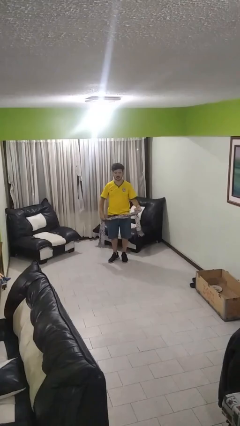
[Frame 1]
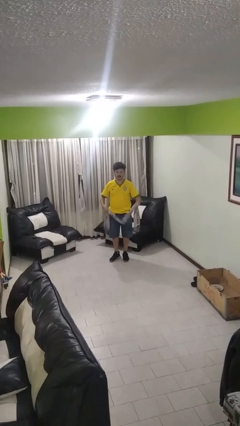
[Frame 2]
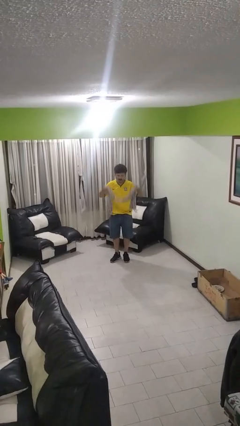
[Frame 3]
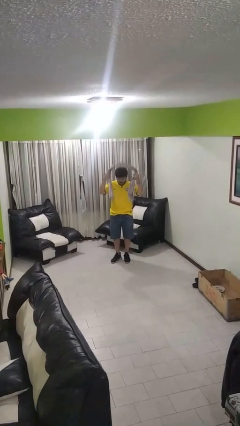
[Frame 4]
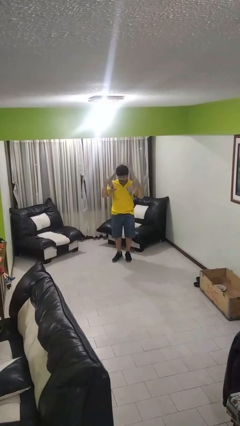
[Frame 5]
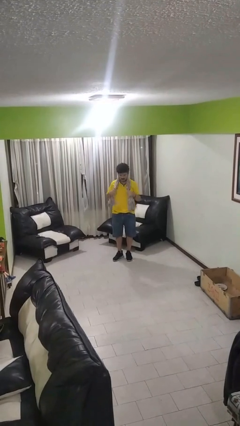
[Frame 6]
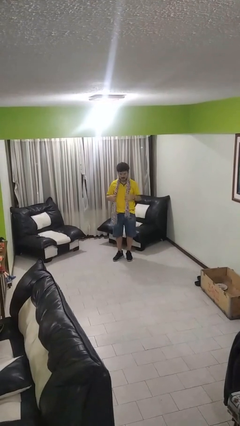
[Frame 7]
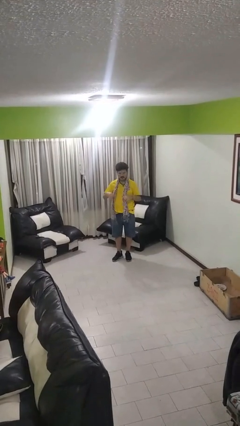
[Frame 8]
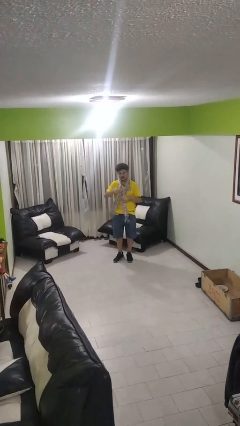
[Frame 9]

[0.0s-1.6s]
person puts on scarf

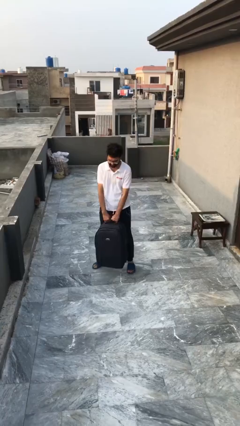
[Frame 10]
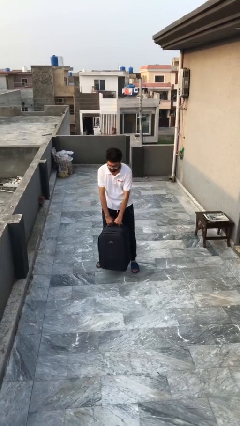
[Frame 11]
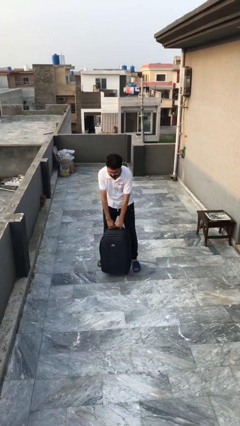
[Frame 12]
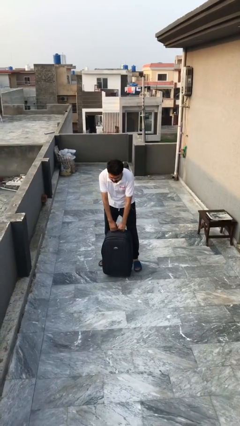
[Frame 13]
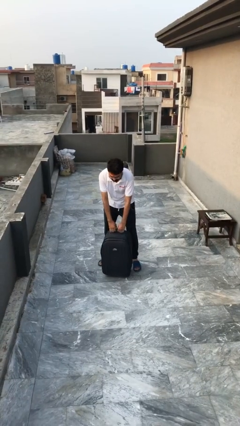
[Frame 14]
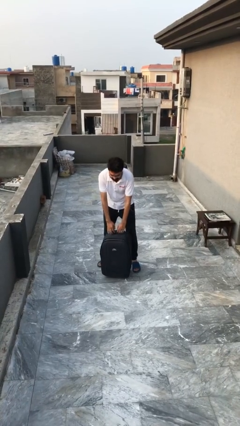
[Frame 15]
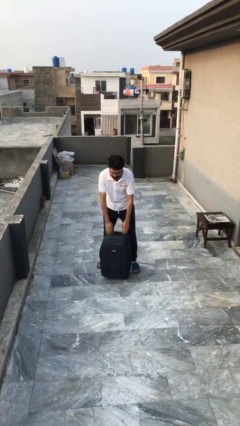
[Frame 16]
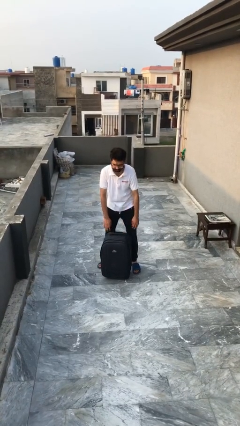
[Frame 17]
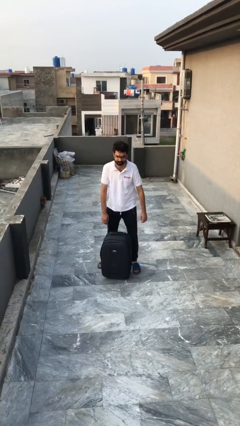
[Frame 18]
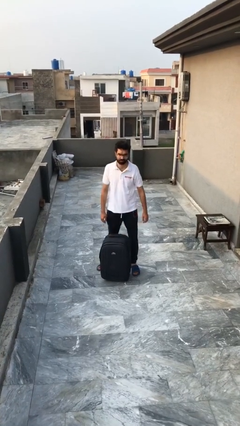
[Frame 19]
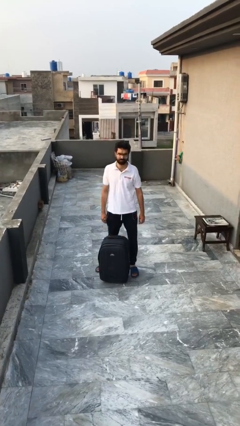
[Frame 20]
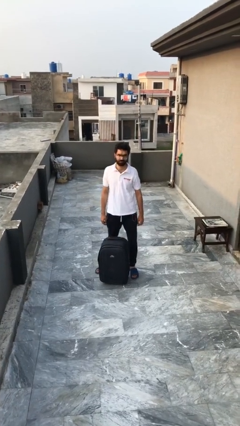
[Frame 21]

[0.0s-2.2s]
person puts down object on floor

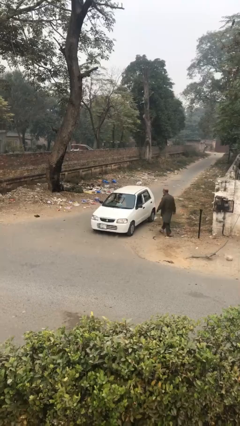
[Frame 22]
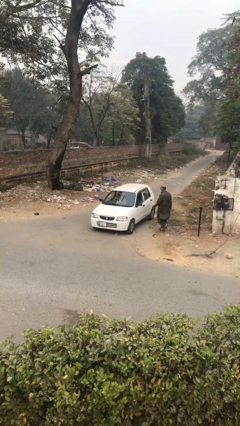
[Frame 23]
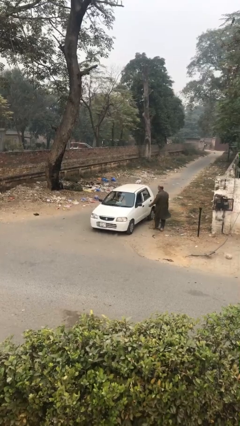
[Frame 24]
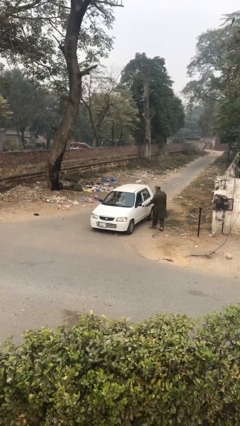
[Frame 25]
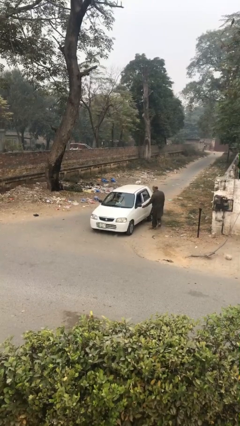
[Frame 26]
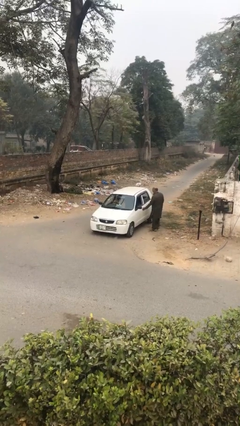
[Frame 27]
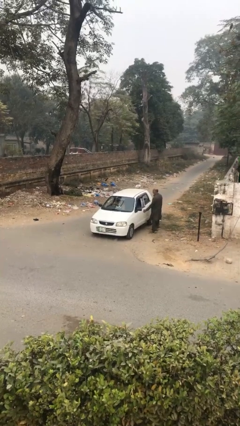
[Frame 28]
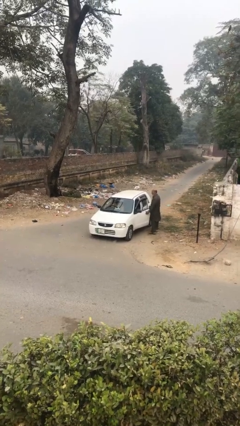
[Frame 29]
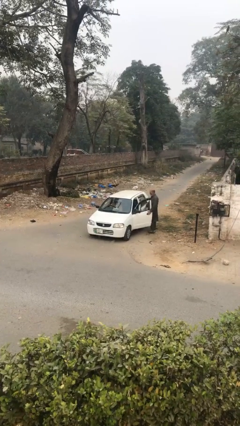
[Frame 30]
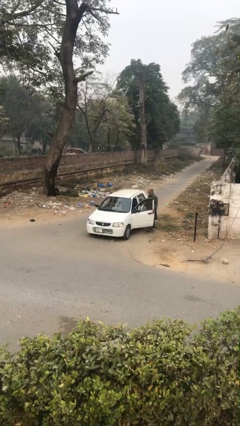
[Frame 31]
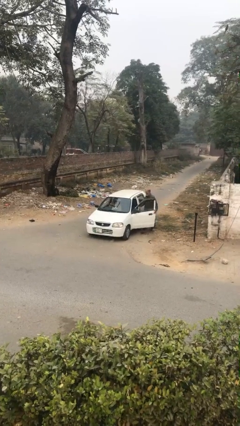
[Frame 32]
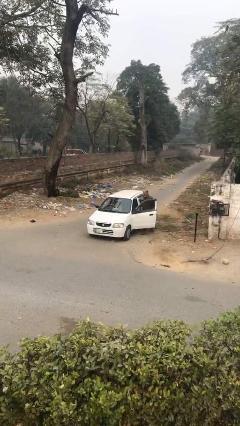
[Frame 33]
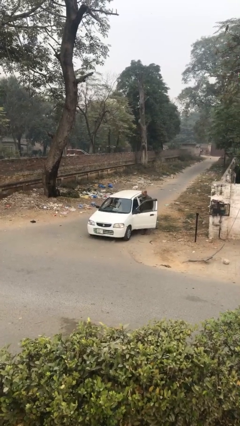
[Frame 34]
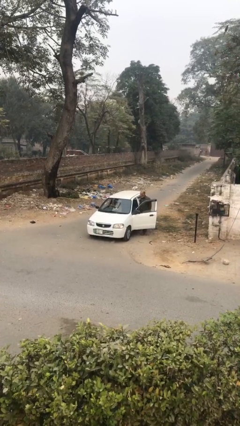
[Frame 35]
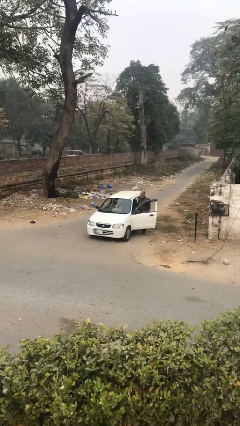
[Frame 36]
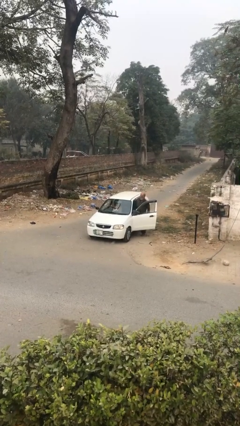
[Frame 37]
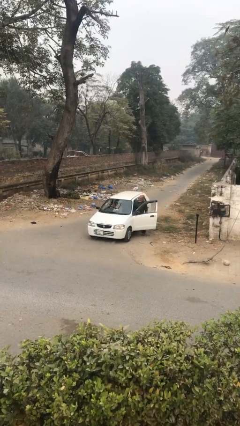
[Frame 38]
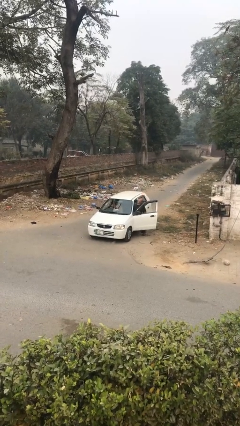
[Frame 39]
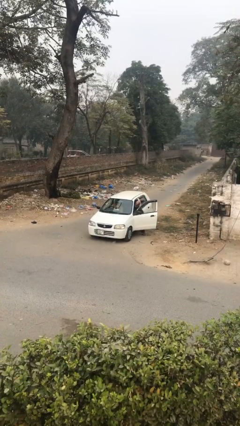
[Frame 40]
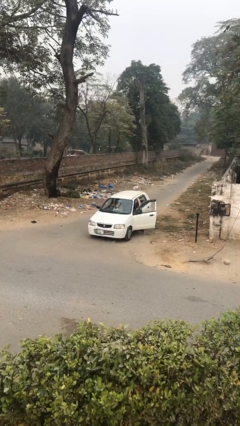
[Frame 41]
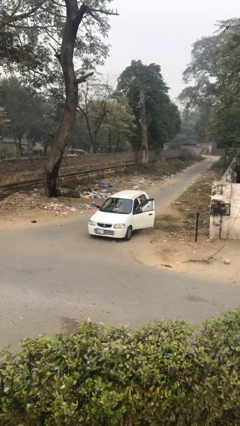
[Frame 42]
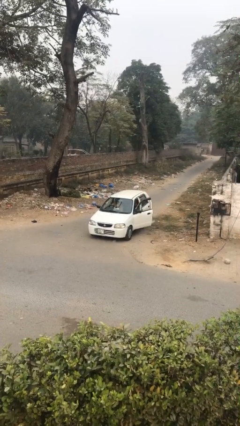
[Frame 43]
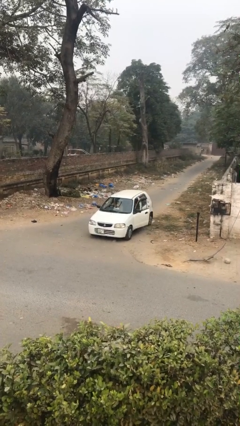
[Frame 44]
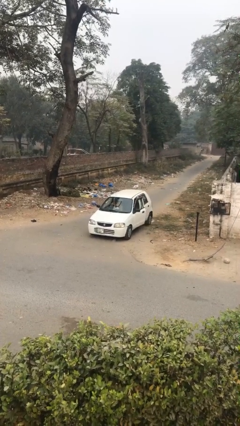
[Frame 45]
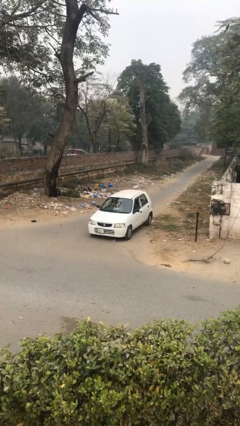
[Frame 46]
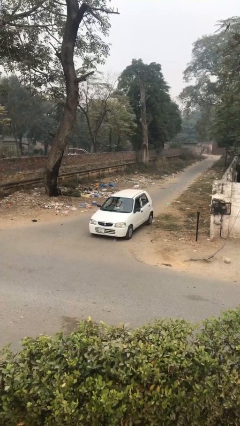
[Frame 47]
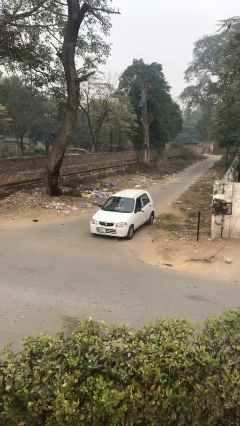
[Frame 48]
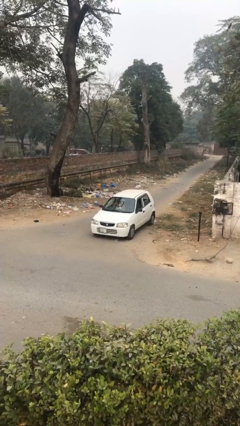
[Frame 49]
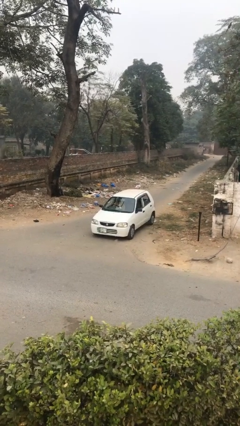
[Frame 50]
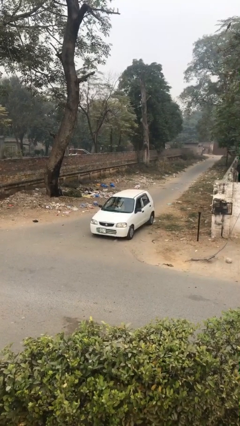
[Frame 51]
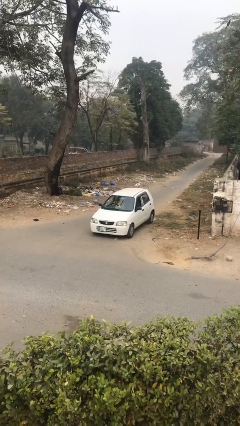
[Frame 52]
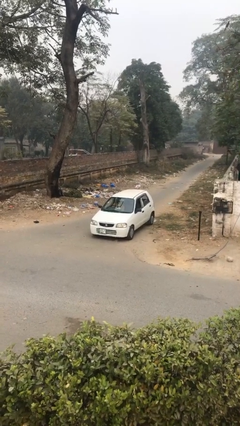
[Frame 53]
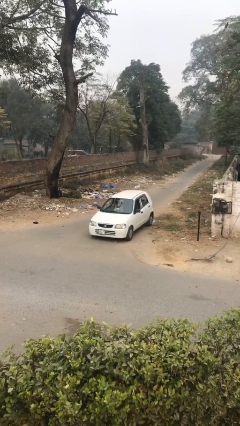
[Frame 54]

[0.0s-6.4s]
car picks up person

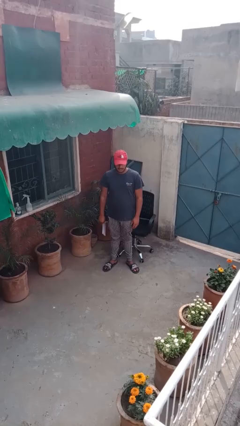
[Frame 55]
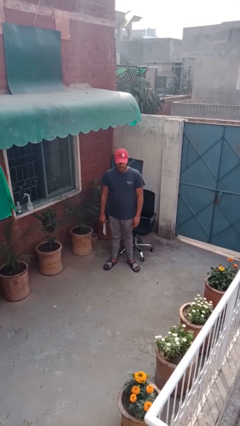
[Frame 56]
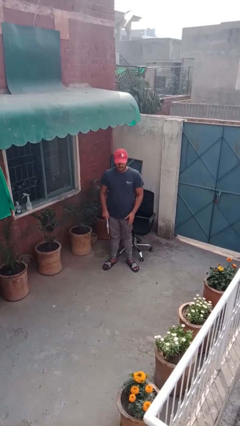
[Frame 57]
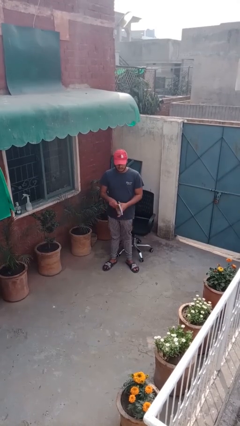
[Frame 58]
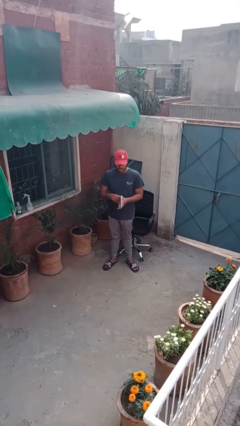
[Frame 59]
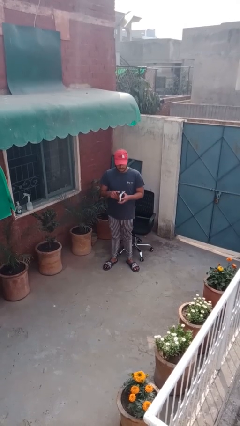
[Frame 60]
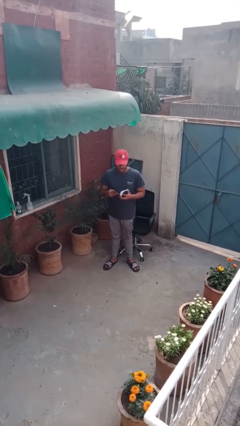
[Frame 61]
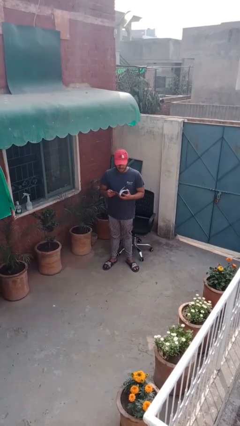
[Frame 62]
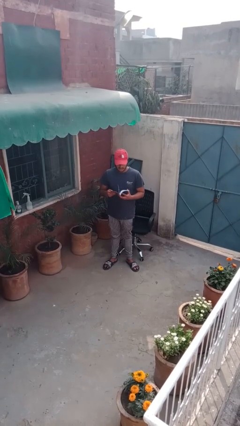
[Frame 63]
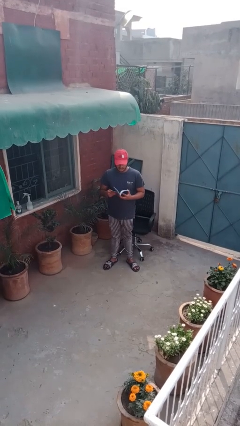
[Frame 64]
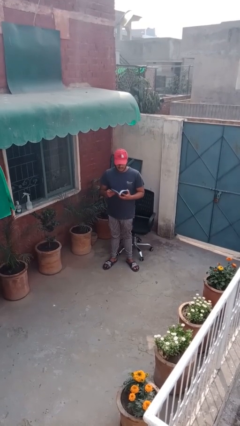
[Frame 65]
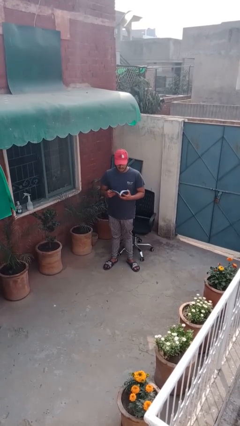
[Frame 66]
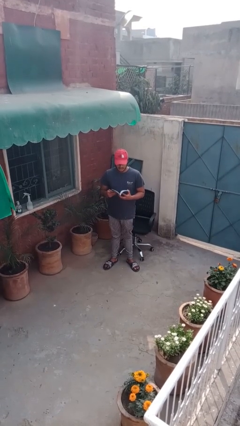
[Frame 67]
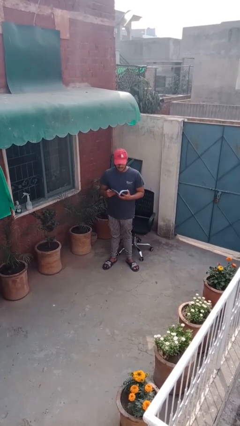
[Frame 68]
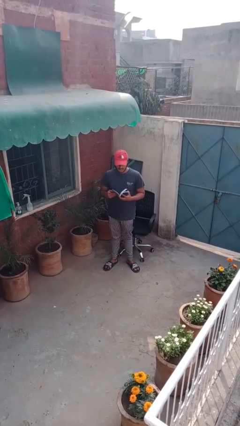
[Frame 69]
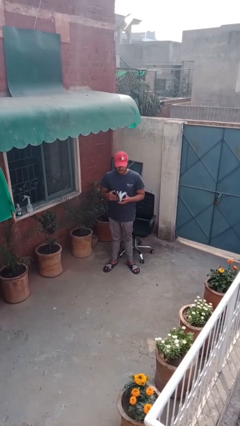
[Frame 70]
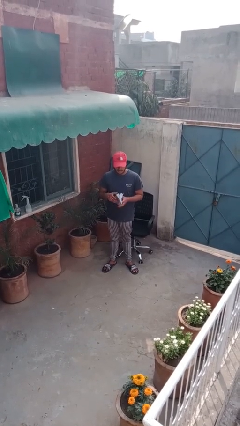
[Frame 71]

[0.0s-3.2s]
person reads document

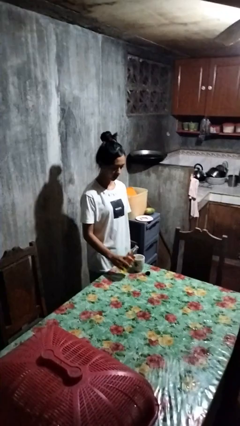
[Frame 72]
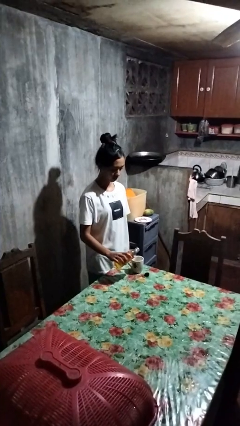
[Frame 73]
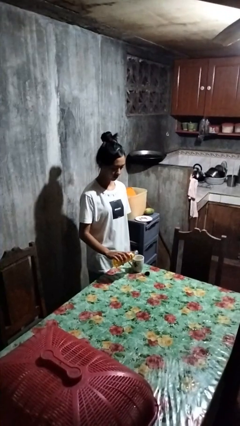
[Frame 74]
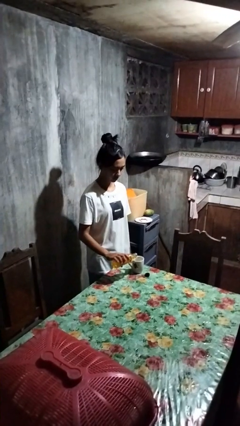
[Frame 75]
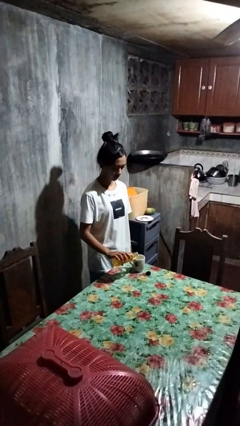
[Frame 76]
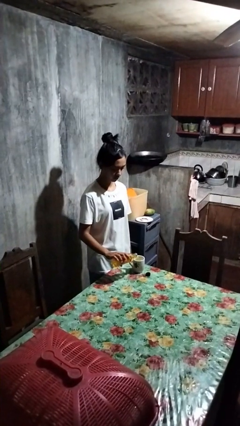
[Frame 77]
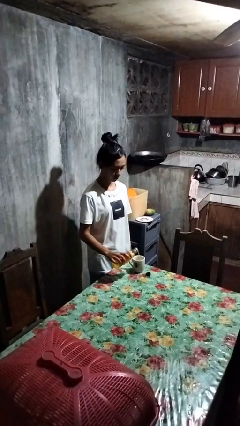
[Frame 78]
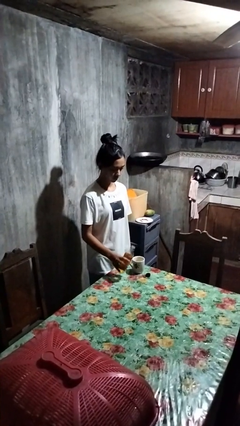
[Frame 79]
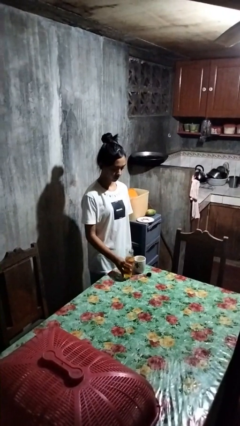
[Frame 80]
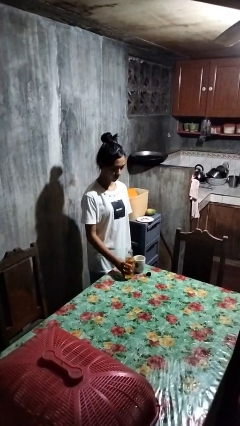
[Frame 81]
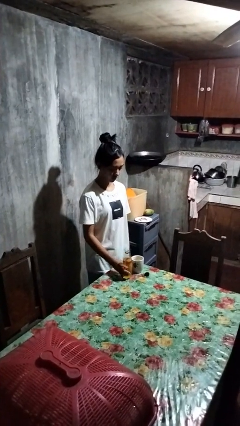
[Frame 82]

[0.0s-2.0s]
person pours liquid into cup

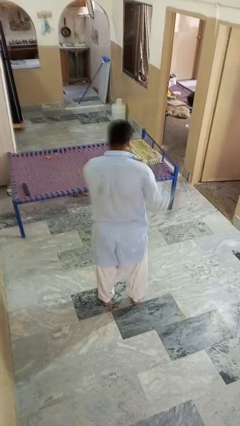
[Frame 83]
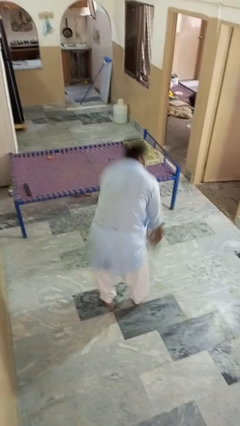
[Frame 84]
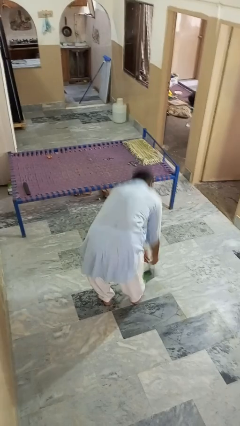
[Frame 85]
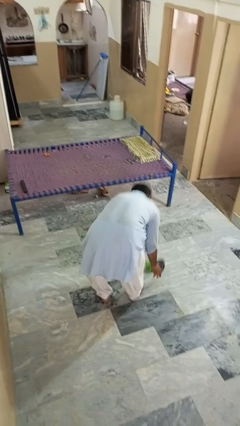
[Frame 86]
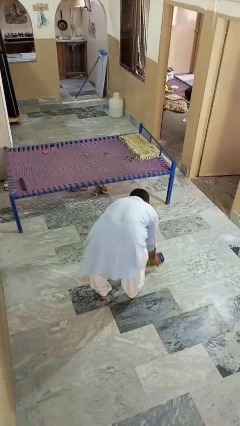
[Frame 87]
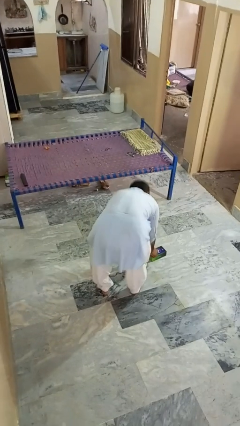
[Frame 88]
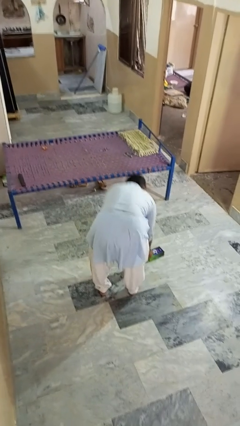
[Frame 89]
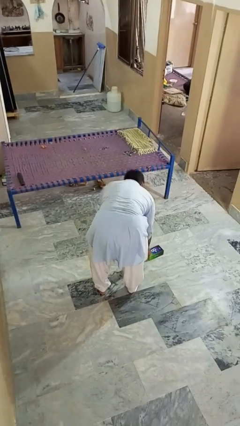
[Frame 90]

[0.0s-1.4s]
person catches dropped object

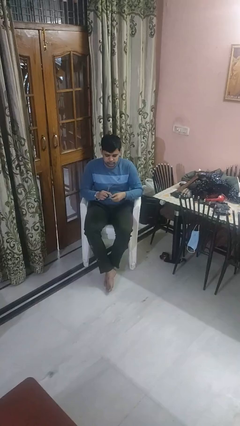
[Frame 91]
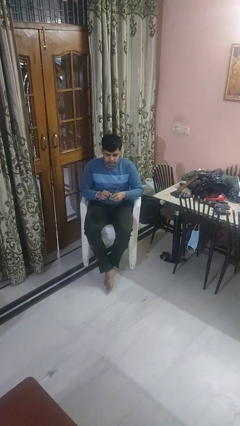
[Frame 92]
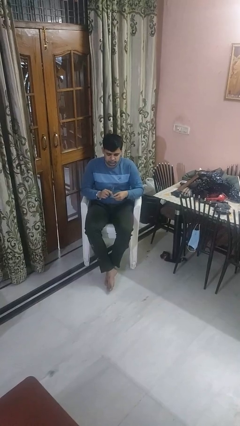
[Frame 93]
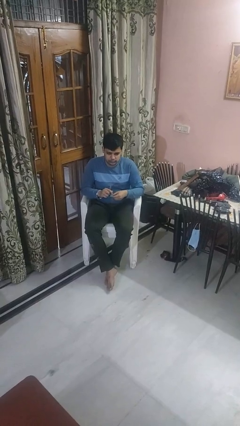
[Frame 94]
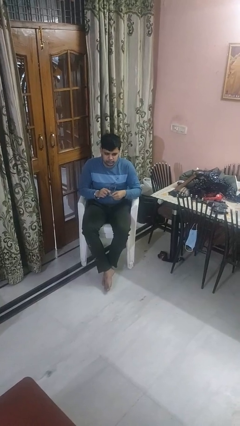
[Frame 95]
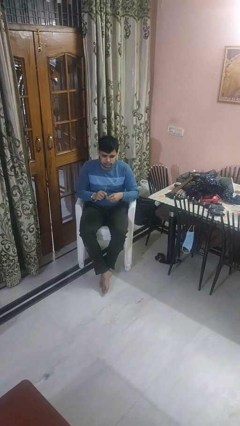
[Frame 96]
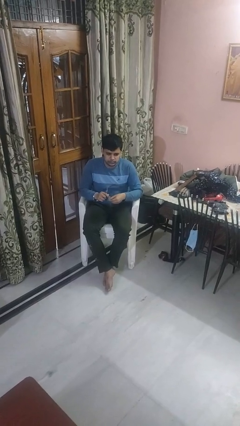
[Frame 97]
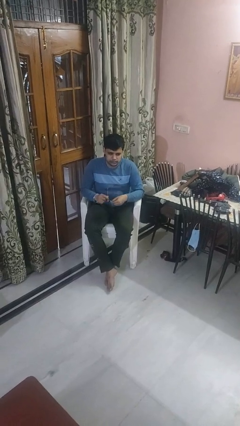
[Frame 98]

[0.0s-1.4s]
person cleans eyeglasses
